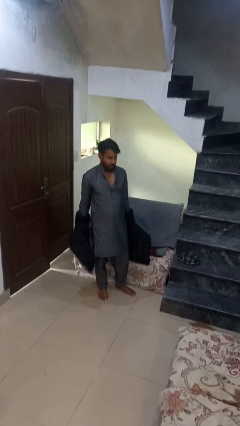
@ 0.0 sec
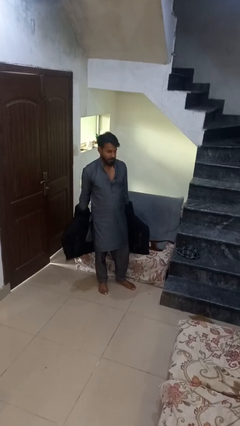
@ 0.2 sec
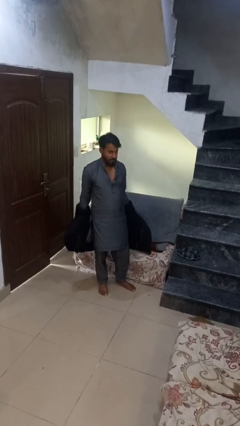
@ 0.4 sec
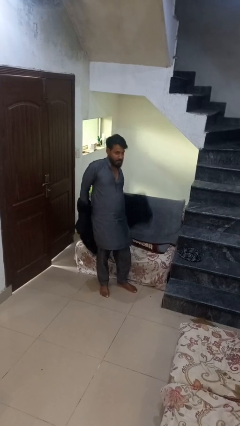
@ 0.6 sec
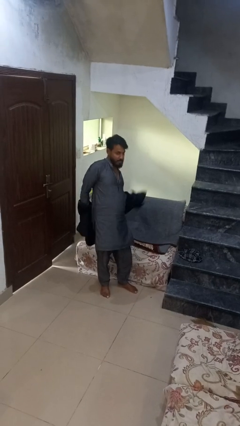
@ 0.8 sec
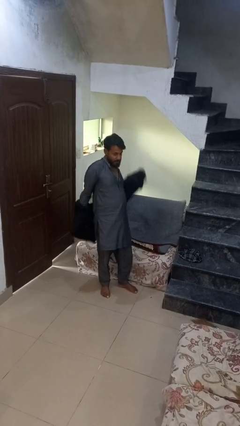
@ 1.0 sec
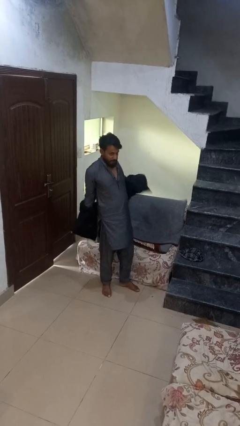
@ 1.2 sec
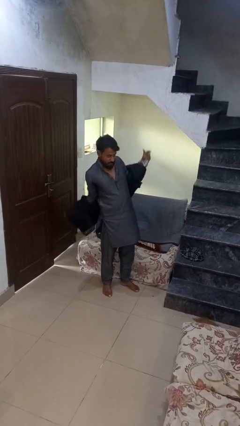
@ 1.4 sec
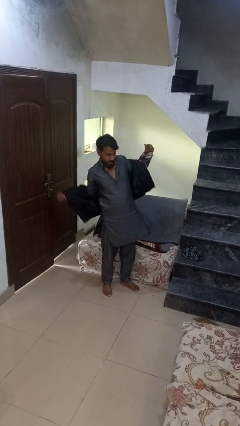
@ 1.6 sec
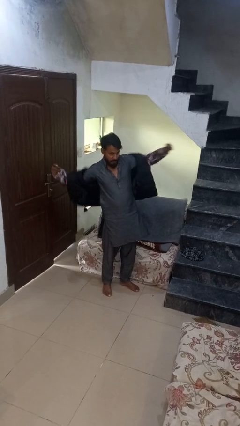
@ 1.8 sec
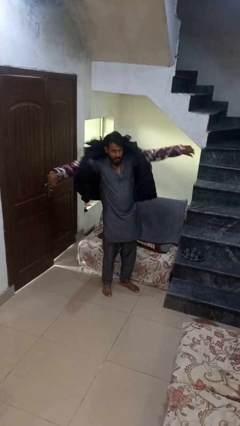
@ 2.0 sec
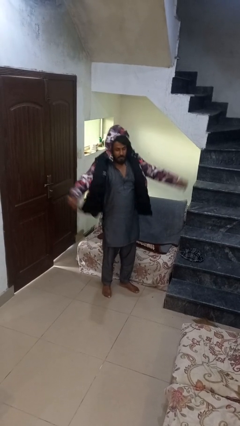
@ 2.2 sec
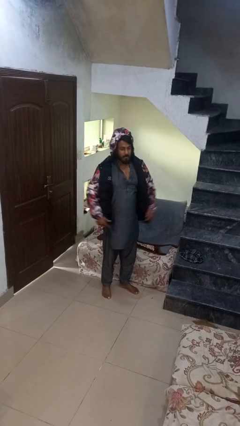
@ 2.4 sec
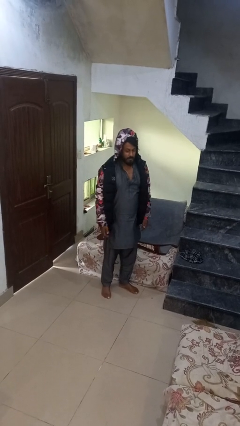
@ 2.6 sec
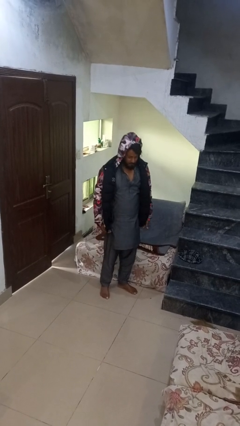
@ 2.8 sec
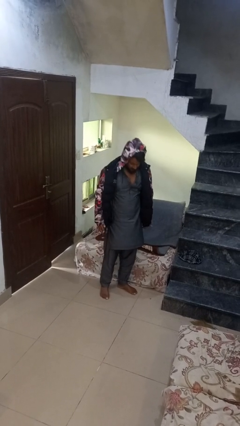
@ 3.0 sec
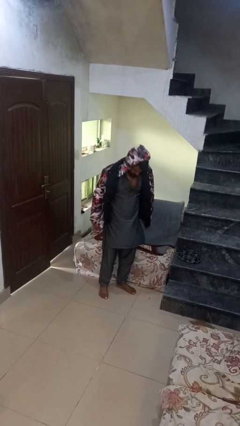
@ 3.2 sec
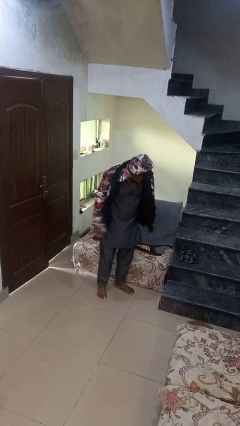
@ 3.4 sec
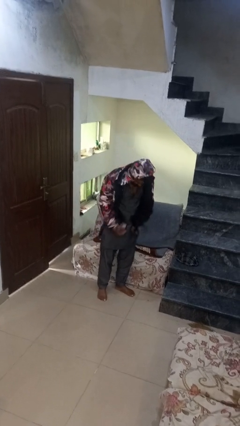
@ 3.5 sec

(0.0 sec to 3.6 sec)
person puts on jacket

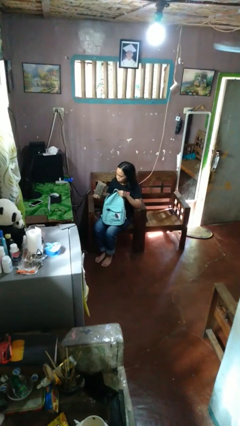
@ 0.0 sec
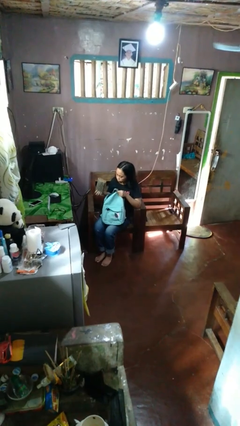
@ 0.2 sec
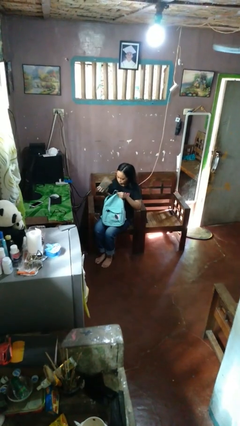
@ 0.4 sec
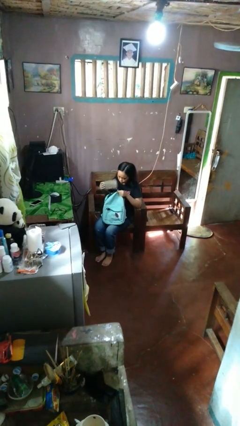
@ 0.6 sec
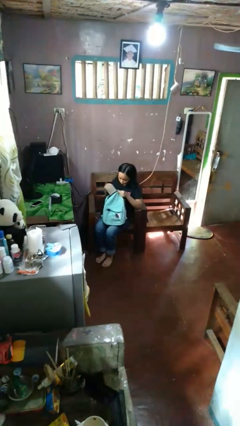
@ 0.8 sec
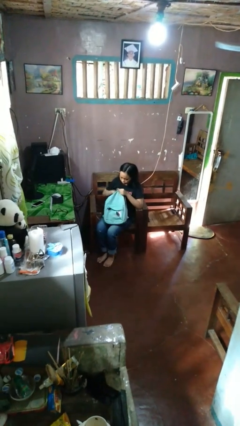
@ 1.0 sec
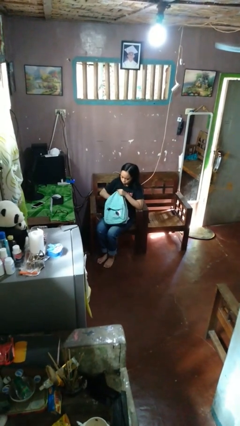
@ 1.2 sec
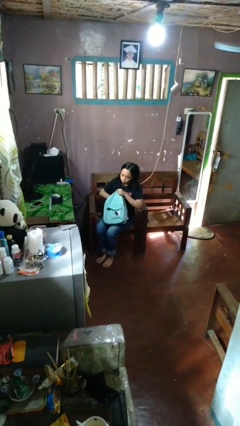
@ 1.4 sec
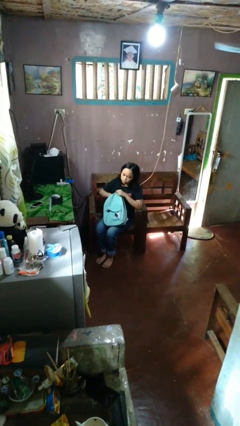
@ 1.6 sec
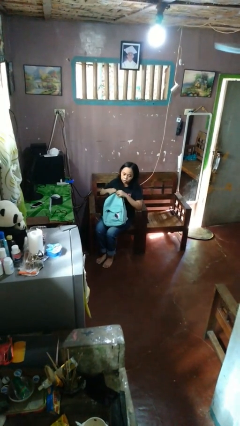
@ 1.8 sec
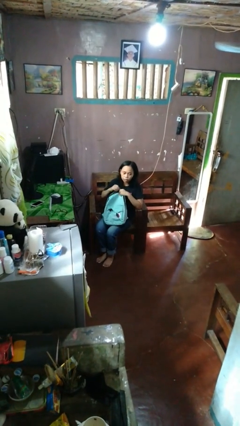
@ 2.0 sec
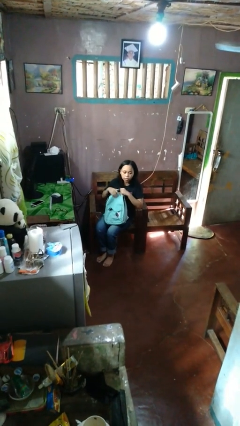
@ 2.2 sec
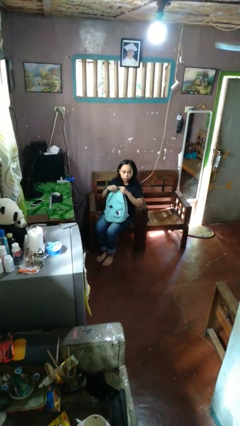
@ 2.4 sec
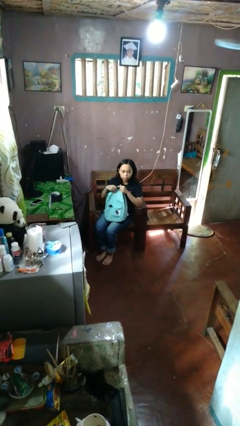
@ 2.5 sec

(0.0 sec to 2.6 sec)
person puts object into backpack

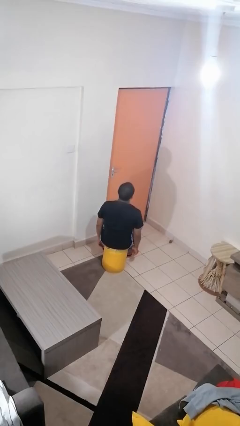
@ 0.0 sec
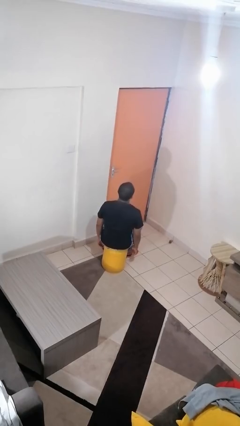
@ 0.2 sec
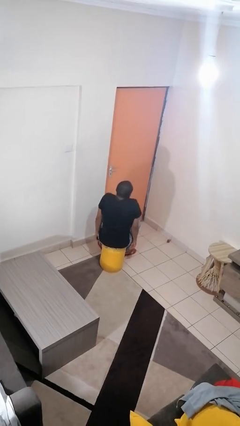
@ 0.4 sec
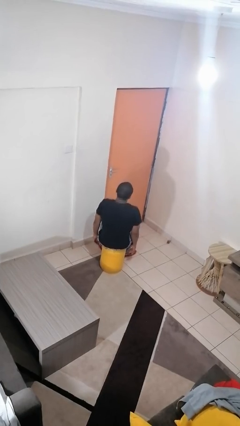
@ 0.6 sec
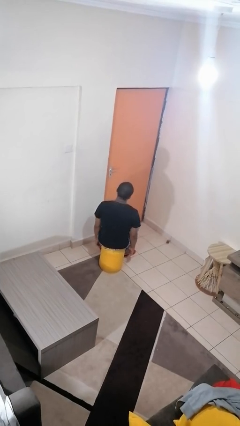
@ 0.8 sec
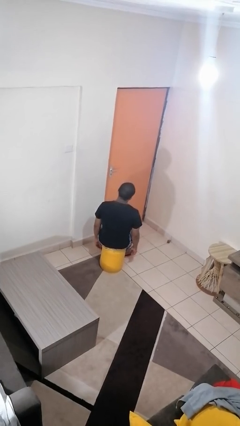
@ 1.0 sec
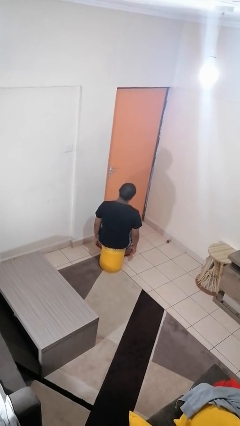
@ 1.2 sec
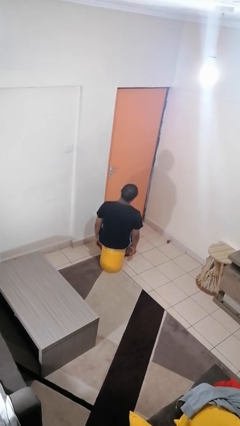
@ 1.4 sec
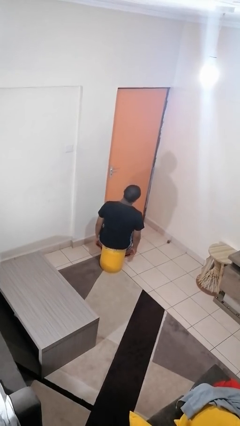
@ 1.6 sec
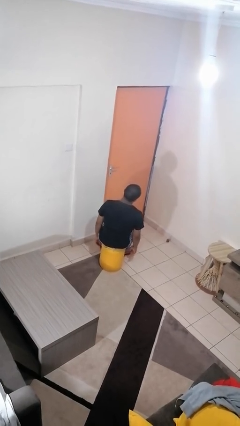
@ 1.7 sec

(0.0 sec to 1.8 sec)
person shrugs

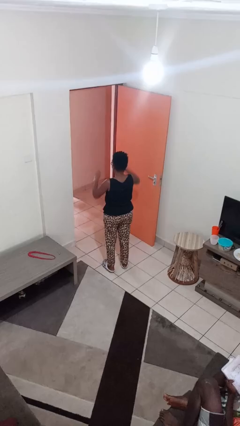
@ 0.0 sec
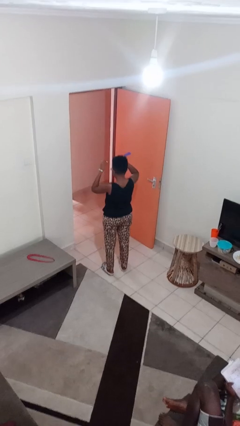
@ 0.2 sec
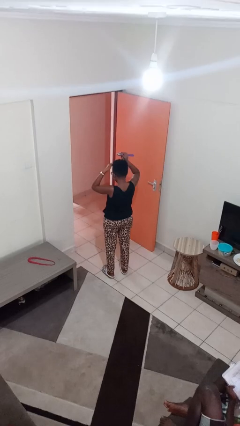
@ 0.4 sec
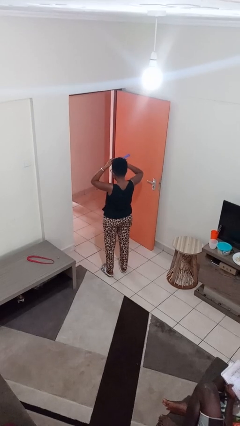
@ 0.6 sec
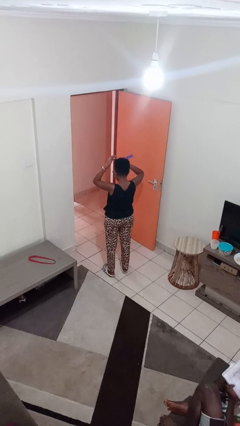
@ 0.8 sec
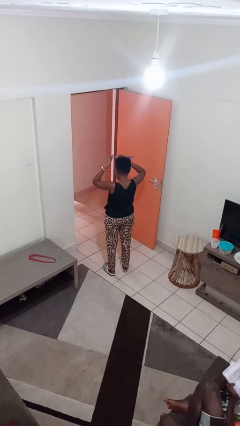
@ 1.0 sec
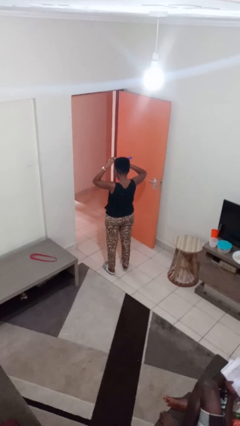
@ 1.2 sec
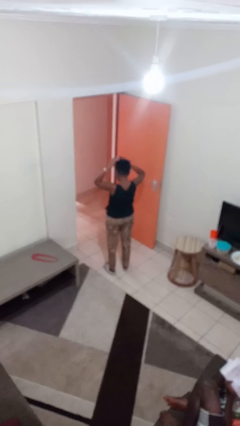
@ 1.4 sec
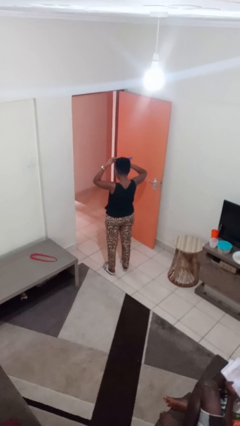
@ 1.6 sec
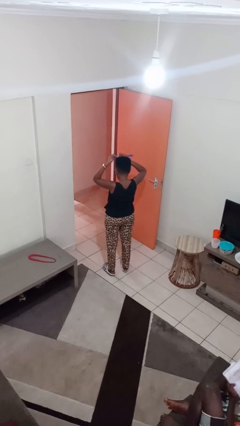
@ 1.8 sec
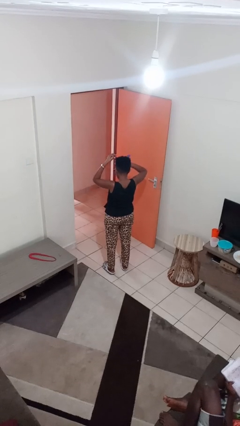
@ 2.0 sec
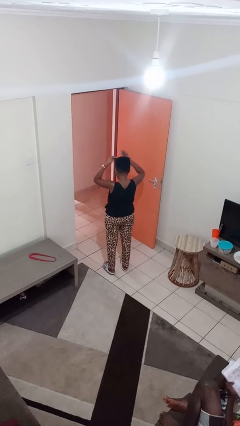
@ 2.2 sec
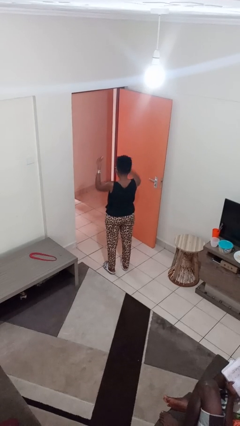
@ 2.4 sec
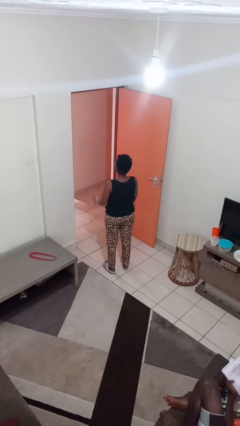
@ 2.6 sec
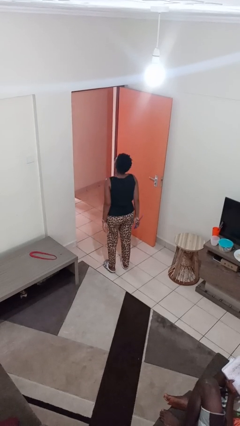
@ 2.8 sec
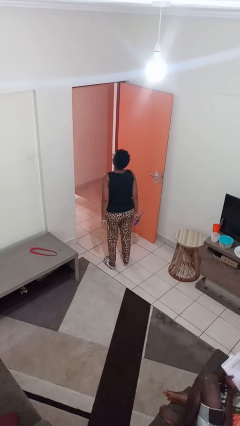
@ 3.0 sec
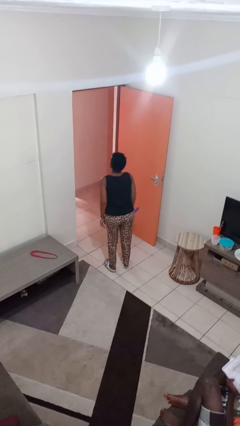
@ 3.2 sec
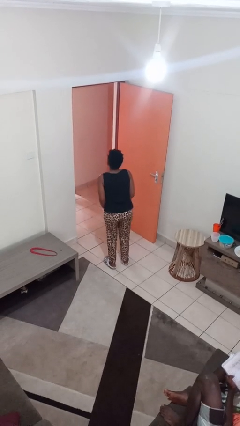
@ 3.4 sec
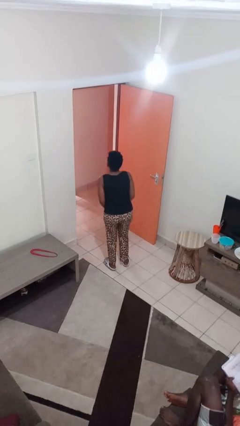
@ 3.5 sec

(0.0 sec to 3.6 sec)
person brushes hair

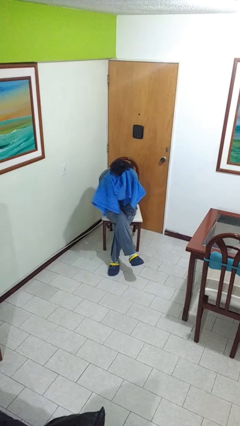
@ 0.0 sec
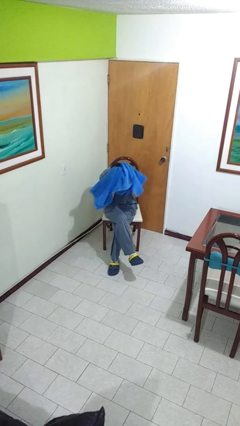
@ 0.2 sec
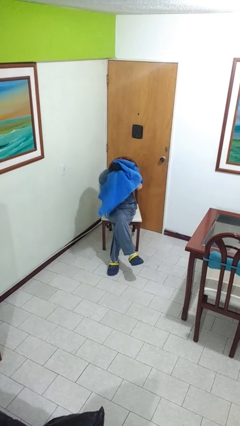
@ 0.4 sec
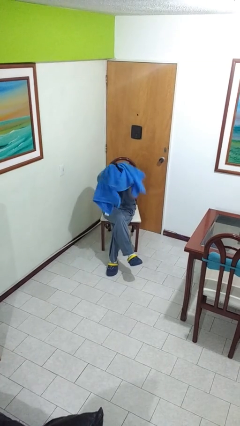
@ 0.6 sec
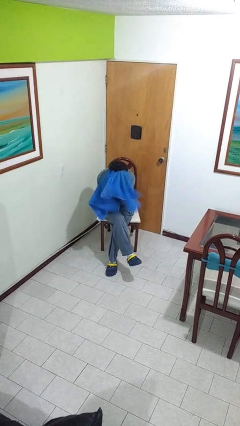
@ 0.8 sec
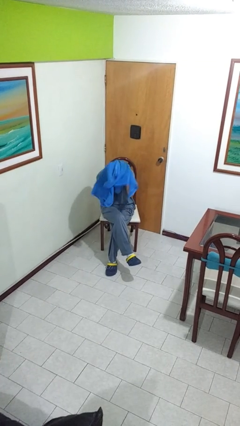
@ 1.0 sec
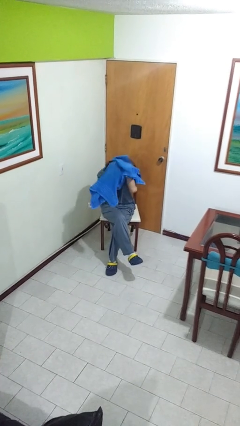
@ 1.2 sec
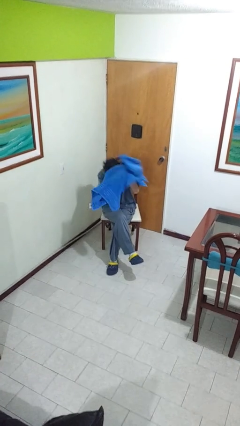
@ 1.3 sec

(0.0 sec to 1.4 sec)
person dries hair with towel

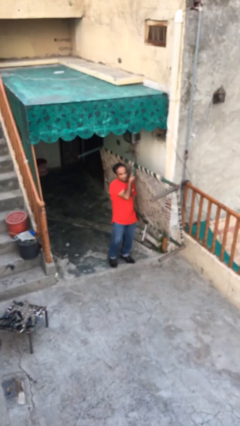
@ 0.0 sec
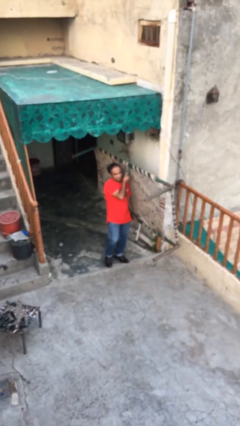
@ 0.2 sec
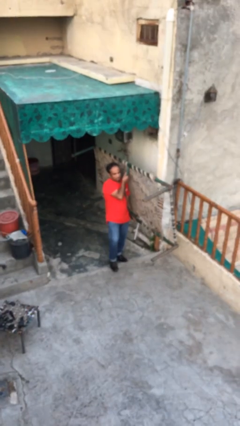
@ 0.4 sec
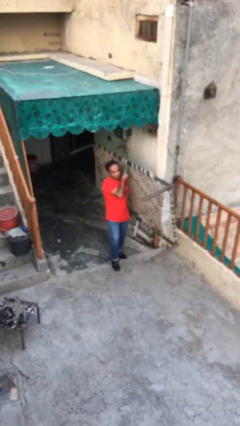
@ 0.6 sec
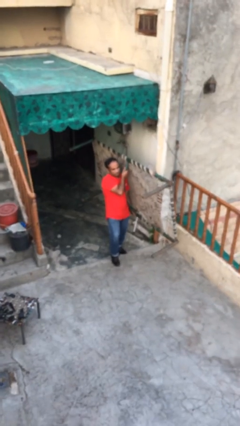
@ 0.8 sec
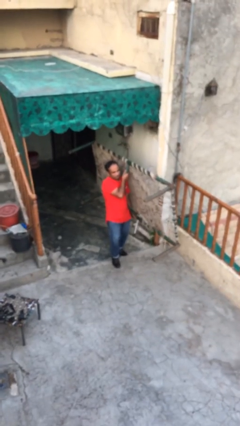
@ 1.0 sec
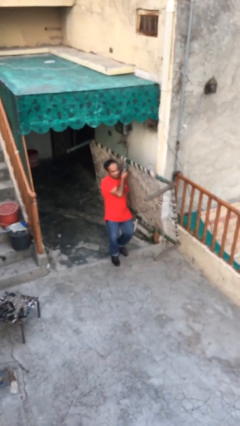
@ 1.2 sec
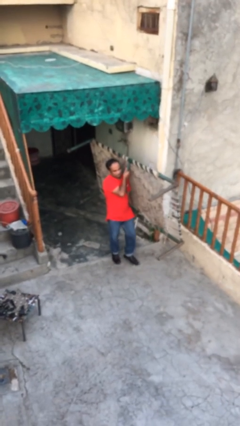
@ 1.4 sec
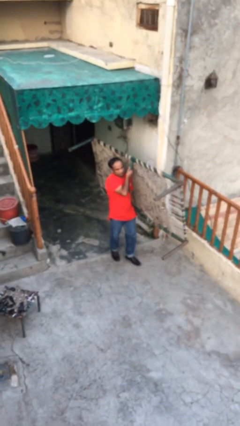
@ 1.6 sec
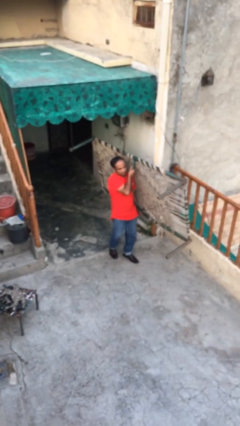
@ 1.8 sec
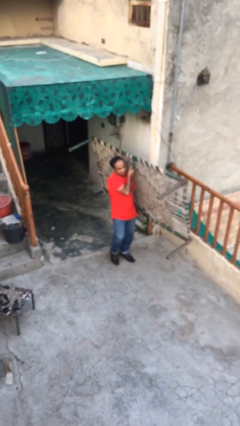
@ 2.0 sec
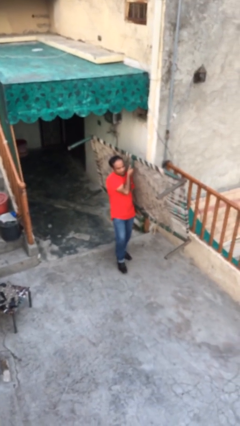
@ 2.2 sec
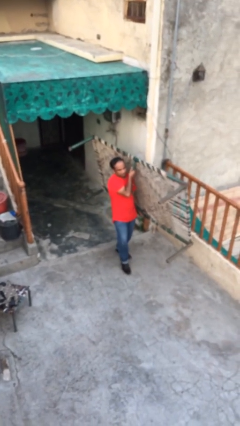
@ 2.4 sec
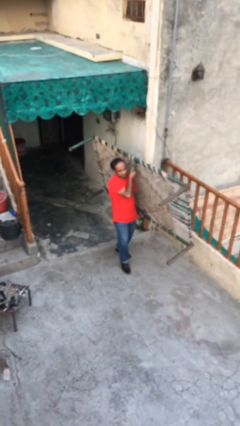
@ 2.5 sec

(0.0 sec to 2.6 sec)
person carries heavy object

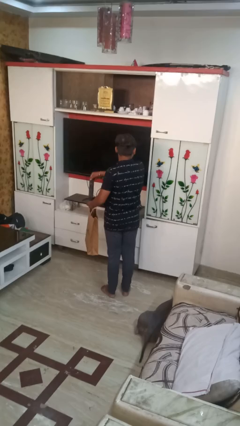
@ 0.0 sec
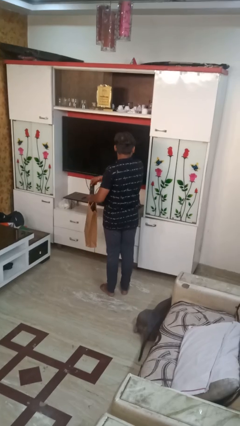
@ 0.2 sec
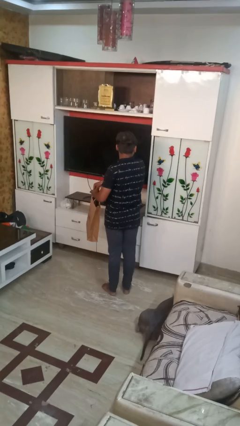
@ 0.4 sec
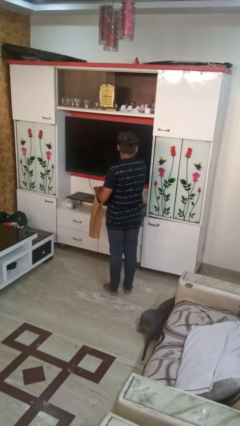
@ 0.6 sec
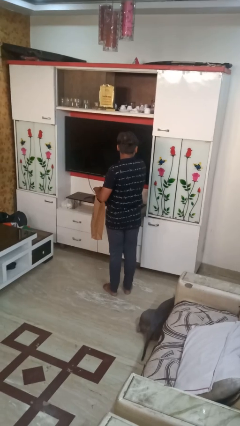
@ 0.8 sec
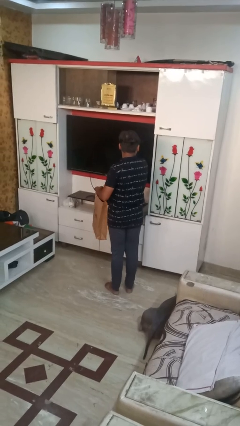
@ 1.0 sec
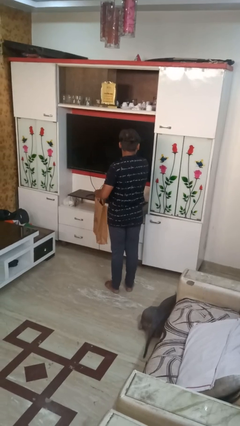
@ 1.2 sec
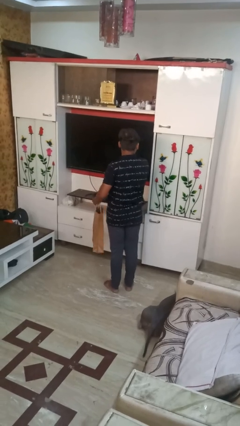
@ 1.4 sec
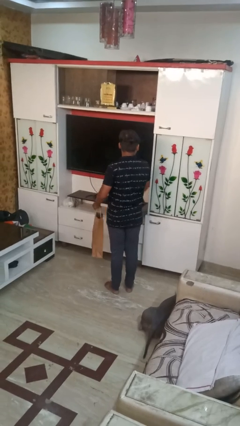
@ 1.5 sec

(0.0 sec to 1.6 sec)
person puts object into bag
